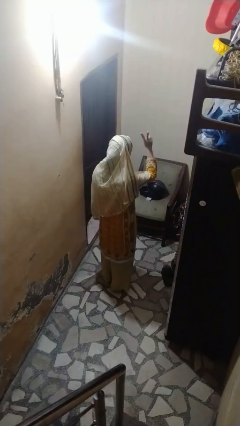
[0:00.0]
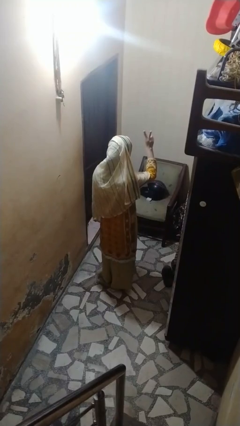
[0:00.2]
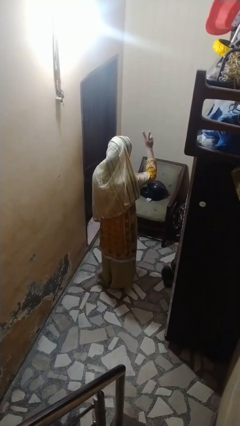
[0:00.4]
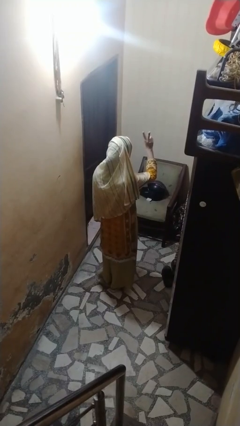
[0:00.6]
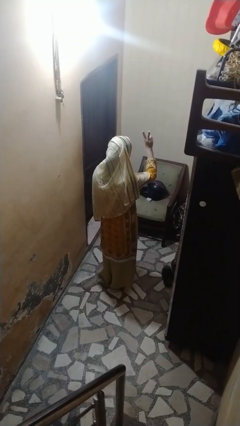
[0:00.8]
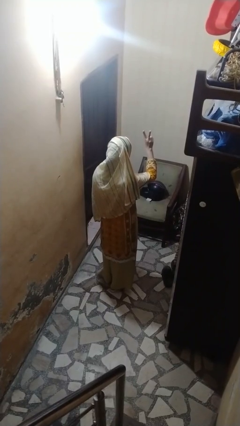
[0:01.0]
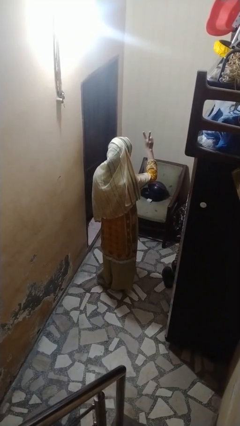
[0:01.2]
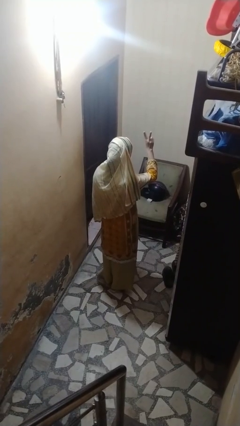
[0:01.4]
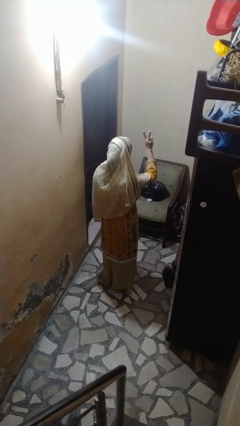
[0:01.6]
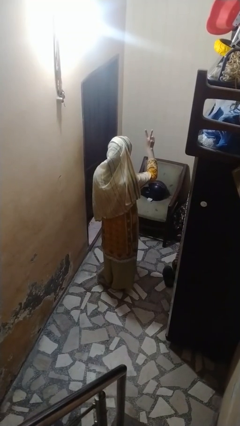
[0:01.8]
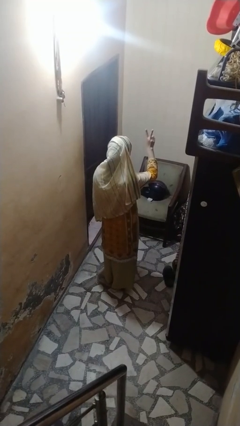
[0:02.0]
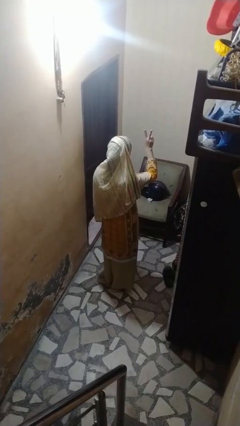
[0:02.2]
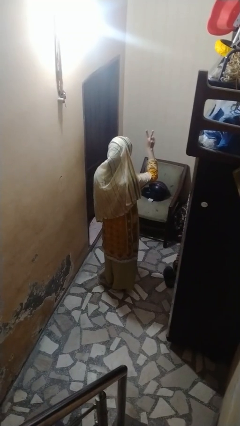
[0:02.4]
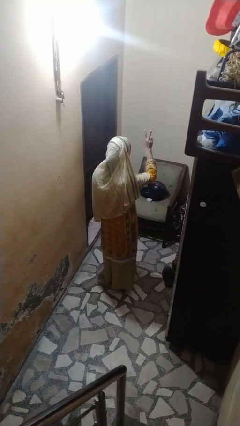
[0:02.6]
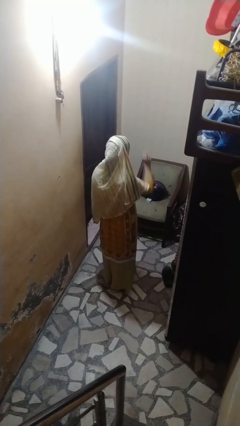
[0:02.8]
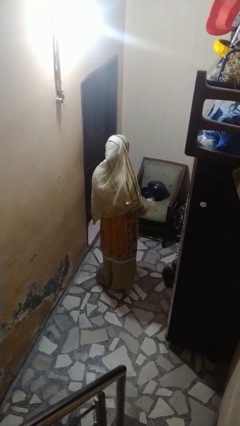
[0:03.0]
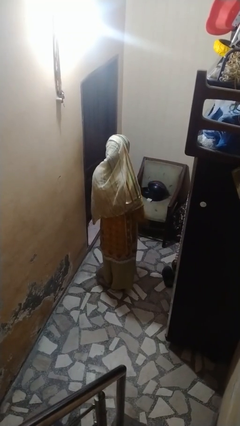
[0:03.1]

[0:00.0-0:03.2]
person gestures peace

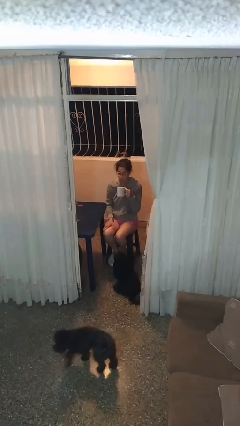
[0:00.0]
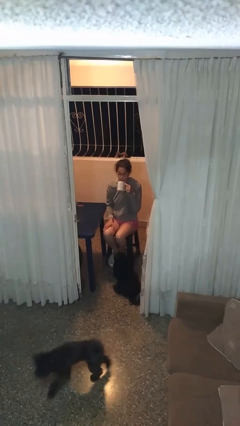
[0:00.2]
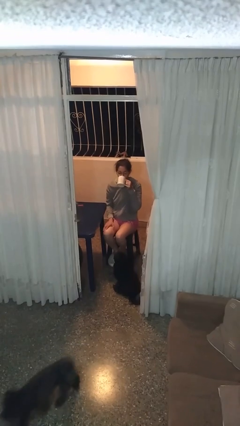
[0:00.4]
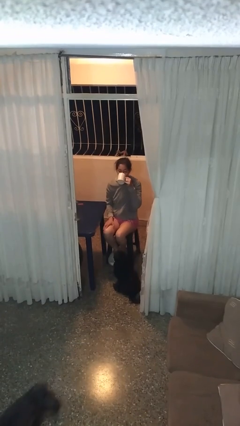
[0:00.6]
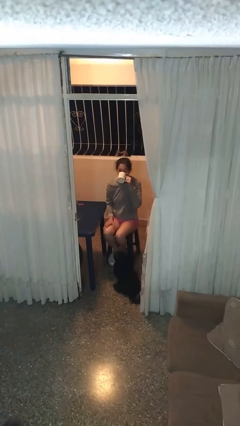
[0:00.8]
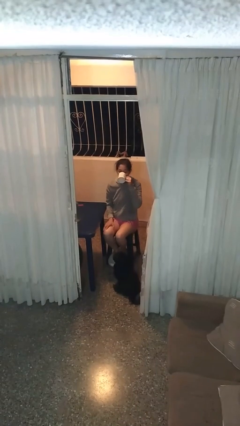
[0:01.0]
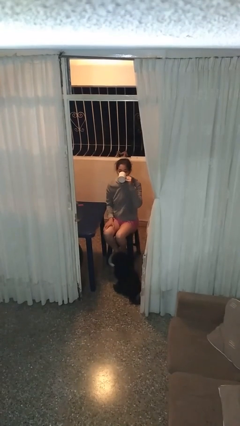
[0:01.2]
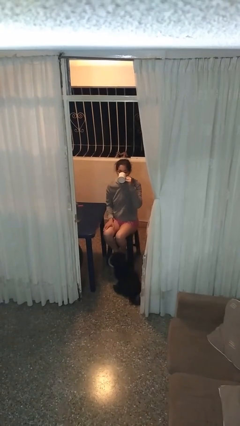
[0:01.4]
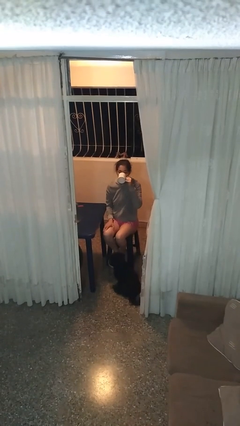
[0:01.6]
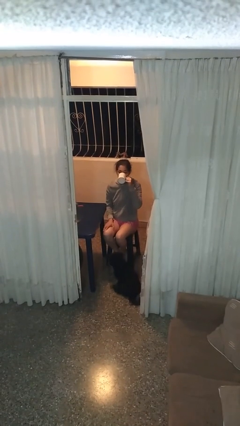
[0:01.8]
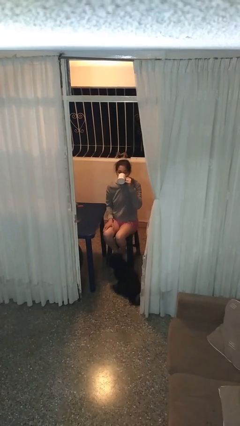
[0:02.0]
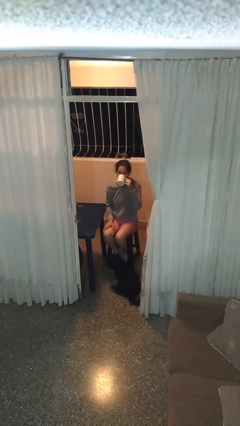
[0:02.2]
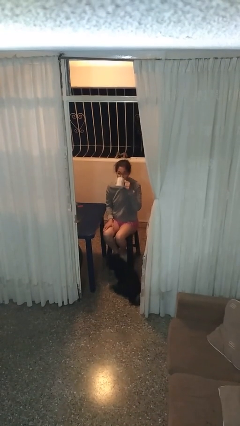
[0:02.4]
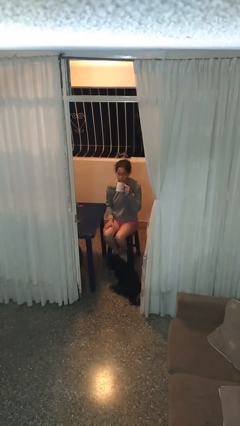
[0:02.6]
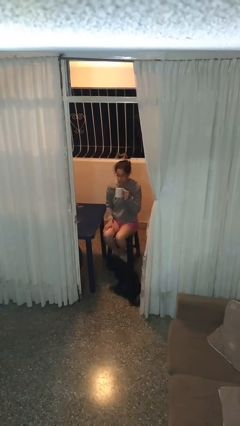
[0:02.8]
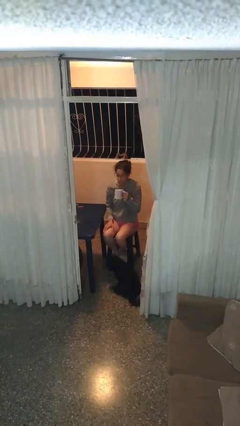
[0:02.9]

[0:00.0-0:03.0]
person drinks from mug

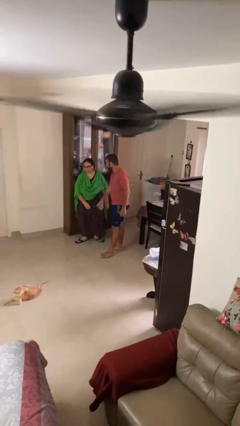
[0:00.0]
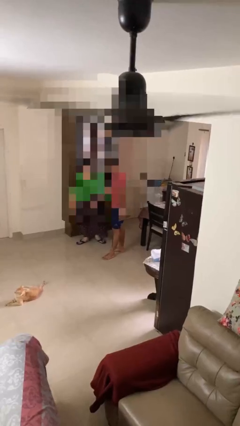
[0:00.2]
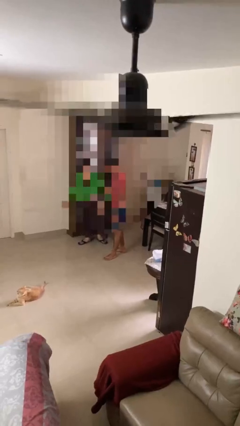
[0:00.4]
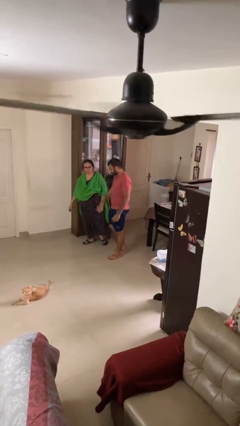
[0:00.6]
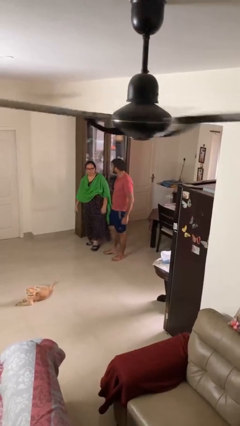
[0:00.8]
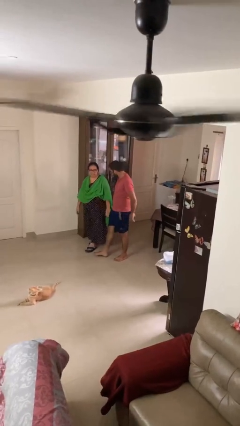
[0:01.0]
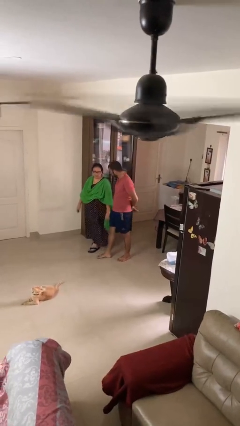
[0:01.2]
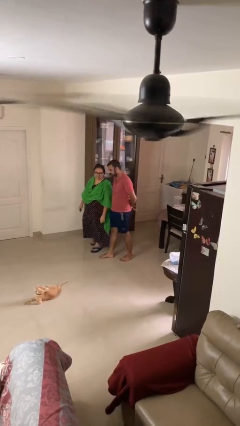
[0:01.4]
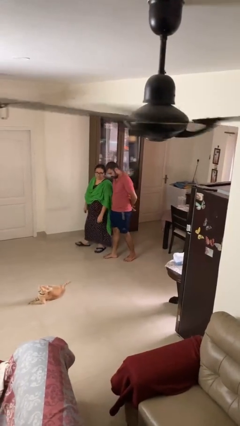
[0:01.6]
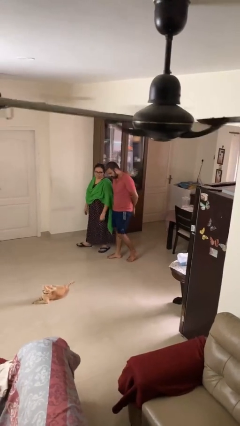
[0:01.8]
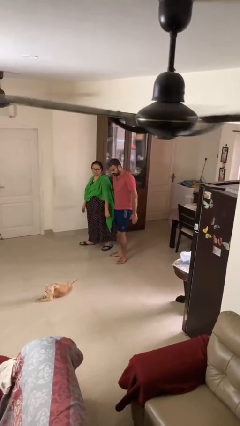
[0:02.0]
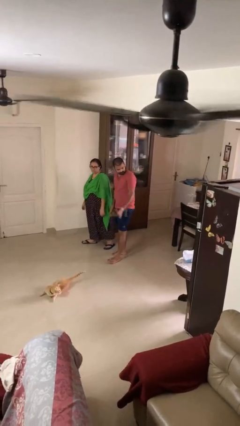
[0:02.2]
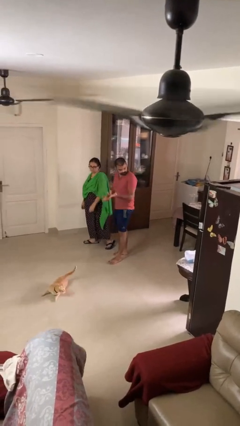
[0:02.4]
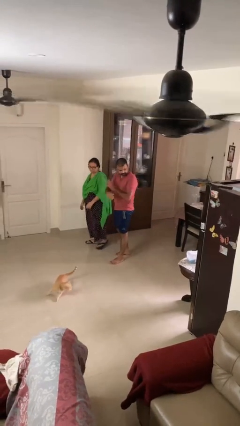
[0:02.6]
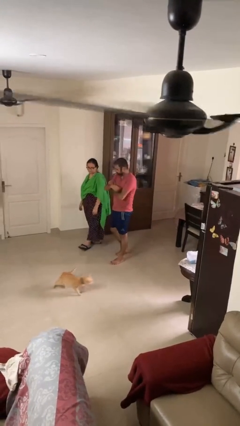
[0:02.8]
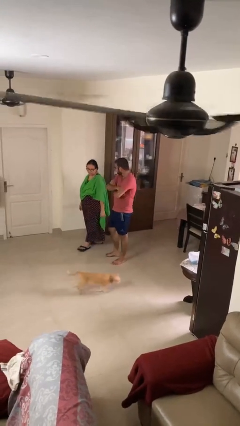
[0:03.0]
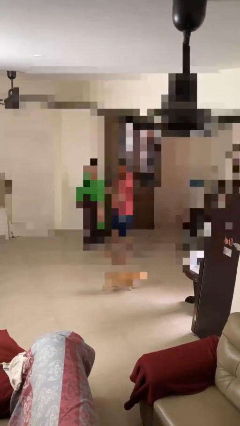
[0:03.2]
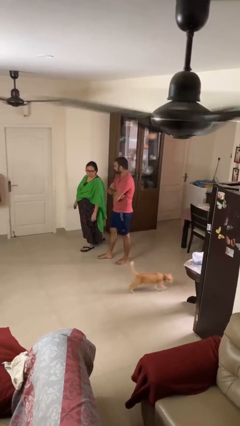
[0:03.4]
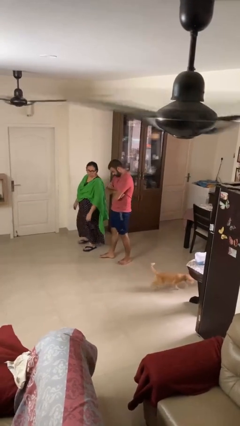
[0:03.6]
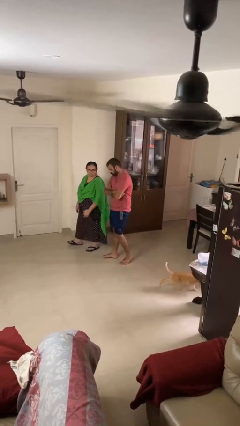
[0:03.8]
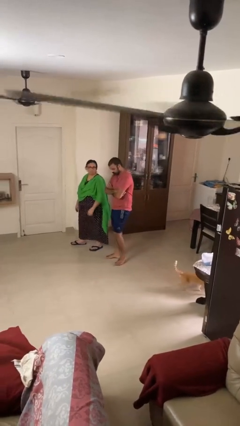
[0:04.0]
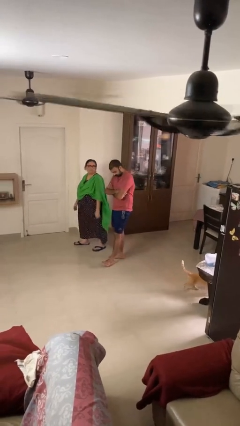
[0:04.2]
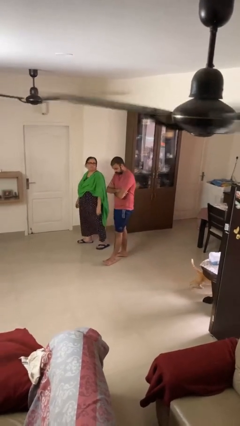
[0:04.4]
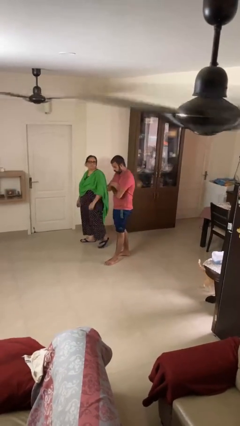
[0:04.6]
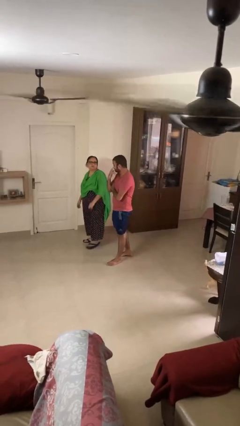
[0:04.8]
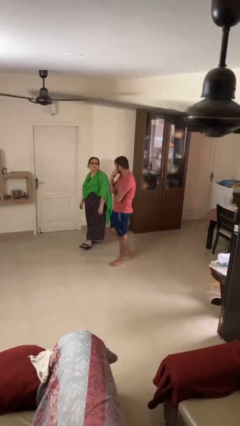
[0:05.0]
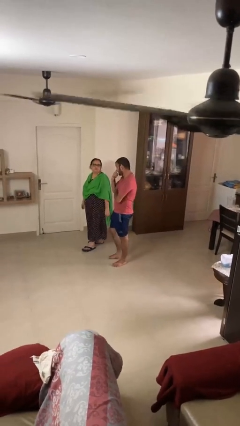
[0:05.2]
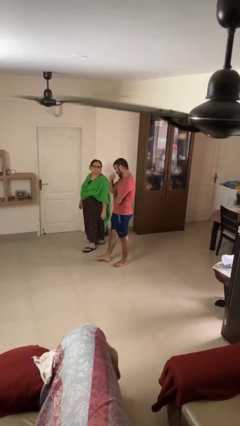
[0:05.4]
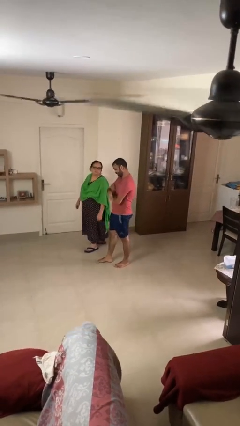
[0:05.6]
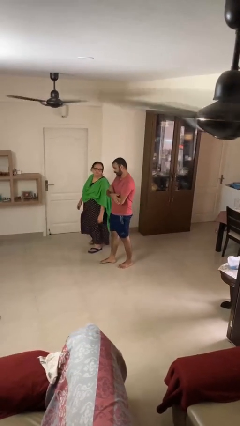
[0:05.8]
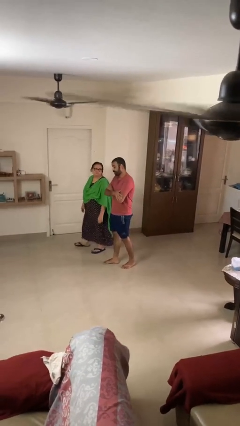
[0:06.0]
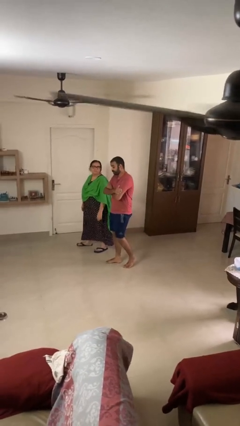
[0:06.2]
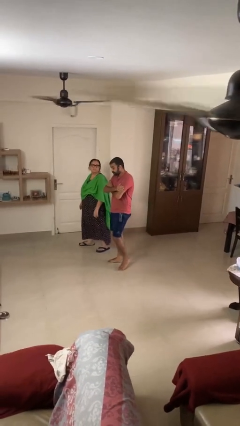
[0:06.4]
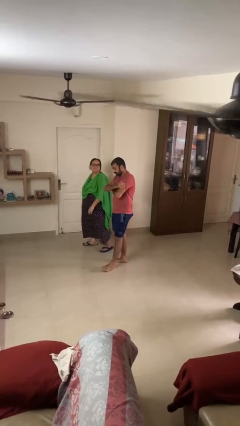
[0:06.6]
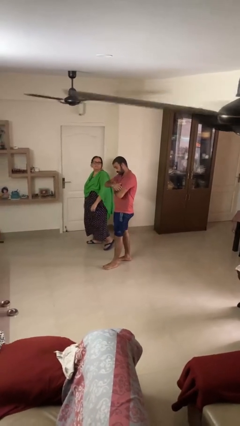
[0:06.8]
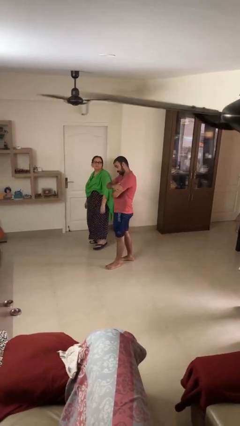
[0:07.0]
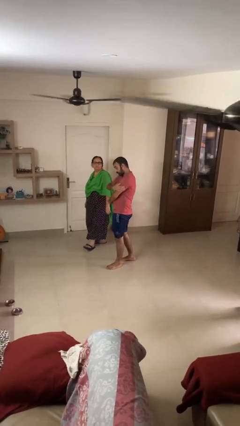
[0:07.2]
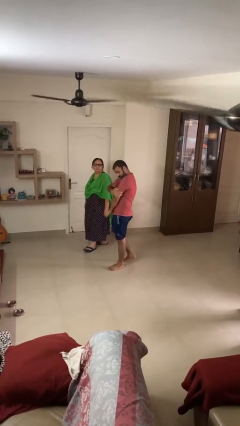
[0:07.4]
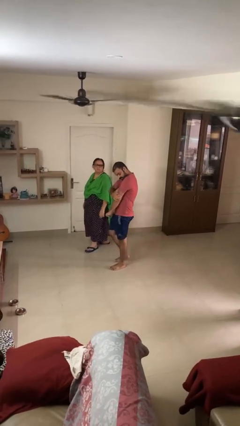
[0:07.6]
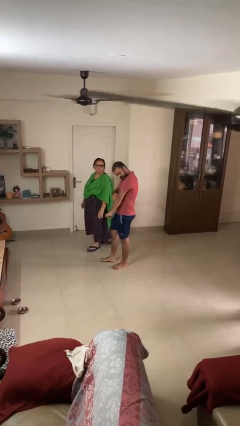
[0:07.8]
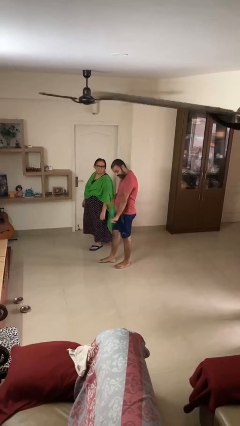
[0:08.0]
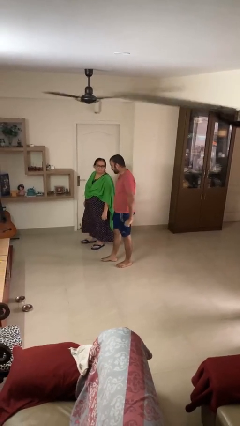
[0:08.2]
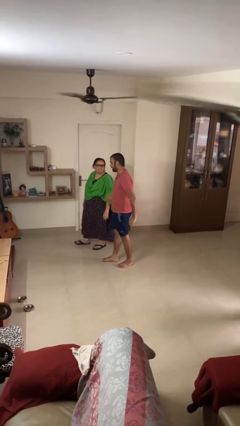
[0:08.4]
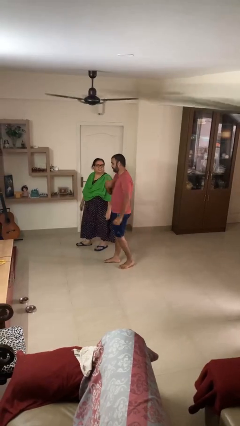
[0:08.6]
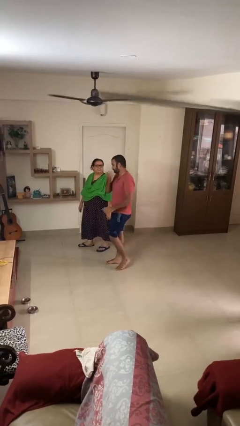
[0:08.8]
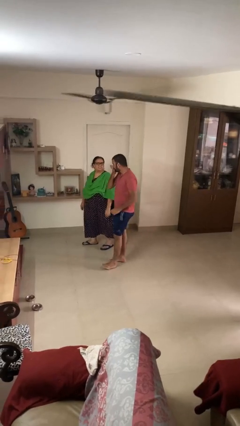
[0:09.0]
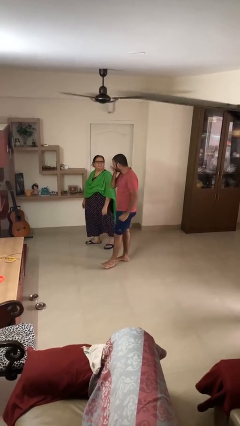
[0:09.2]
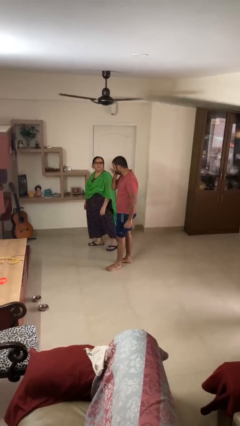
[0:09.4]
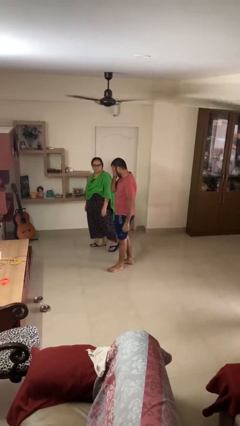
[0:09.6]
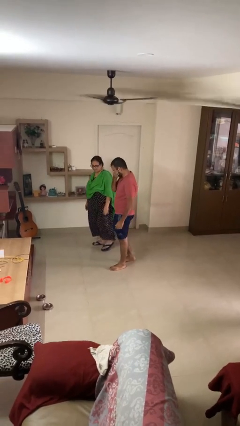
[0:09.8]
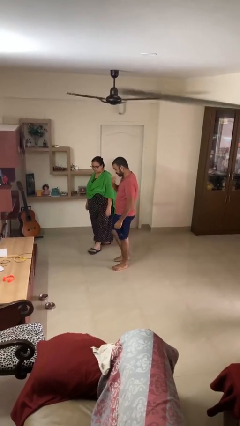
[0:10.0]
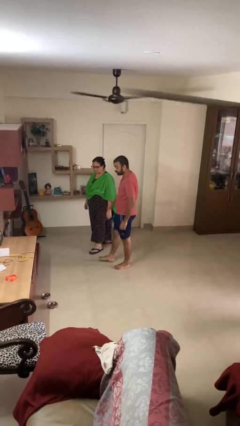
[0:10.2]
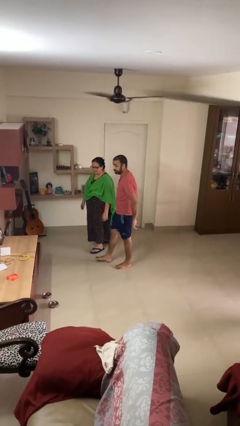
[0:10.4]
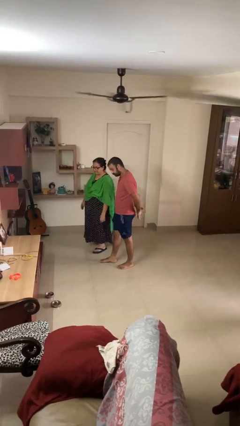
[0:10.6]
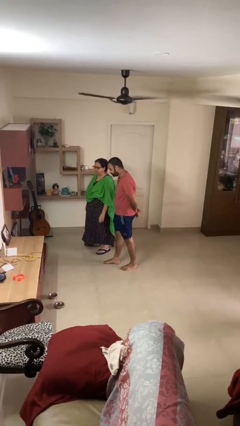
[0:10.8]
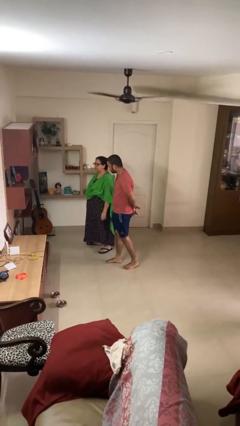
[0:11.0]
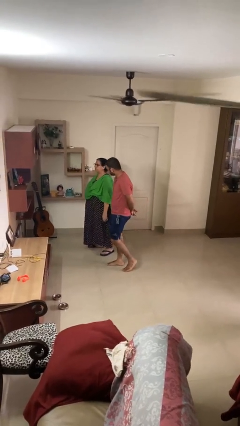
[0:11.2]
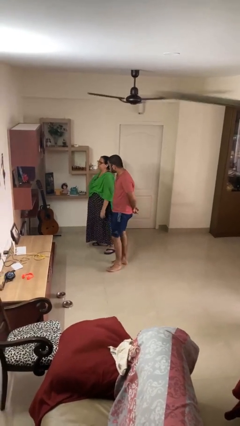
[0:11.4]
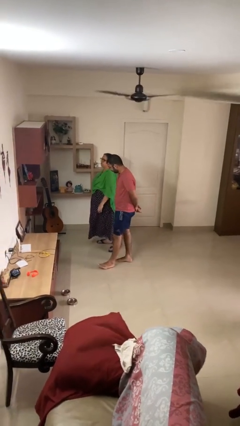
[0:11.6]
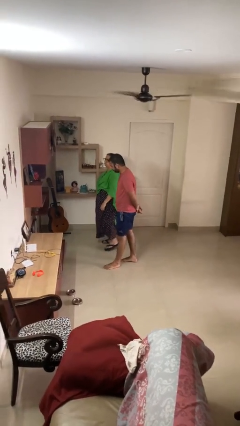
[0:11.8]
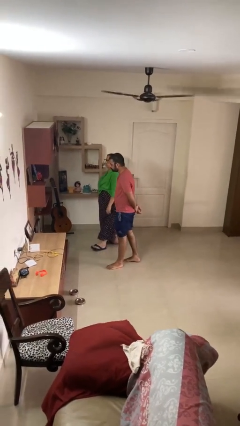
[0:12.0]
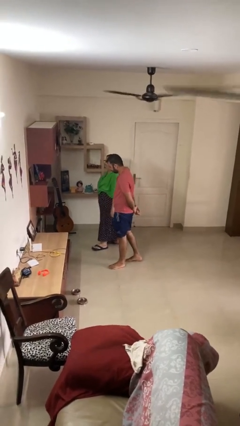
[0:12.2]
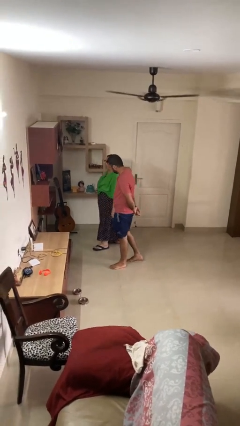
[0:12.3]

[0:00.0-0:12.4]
person talks to person
